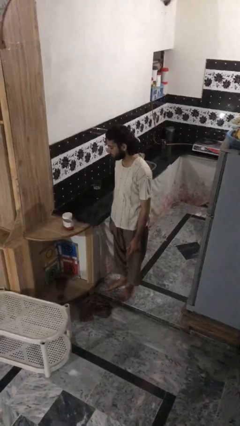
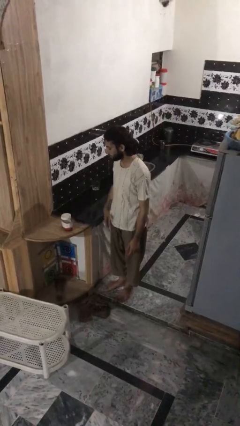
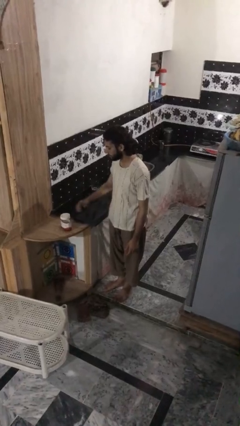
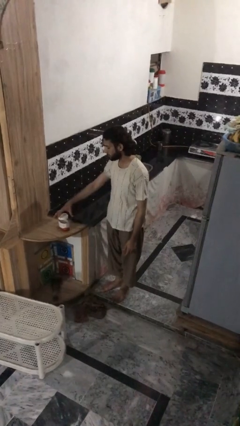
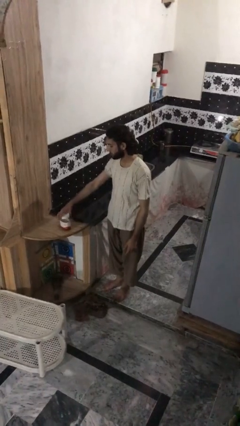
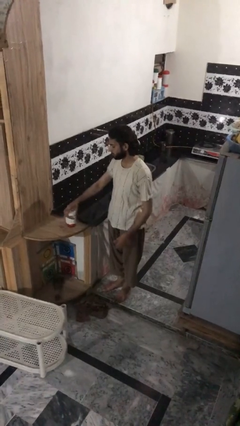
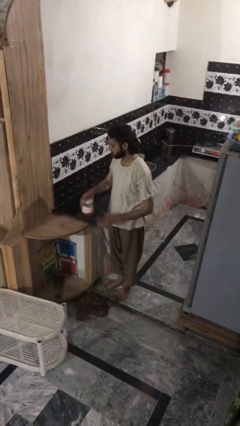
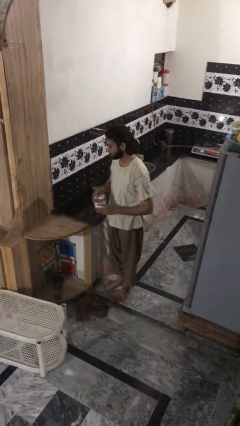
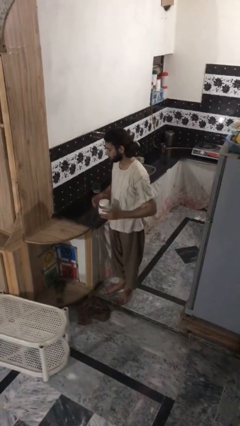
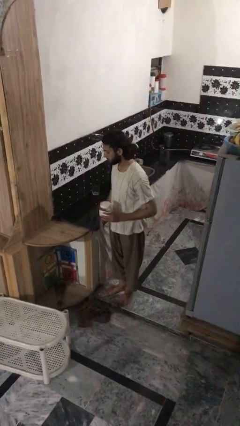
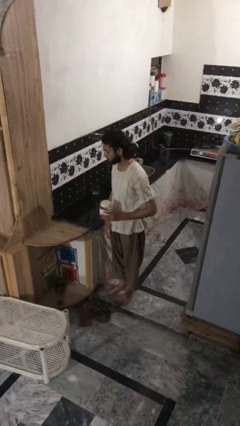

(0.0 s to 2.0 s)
person picks up object from countertop

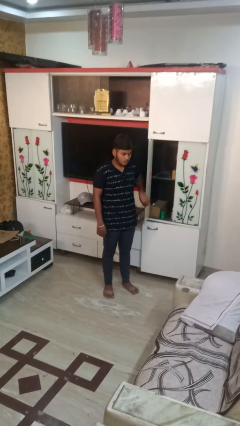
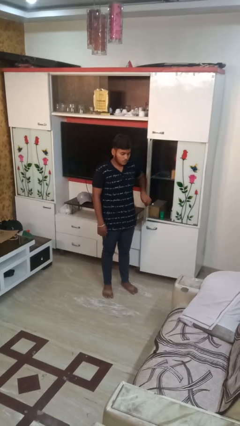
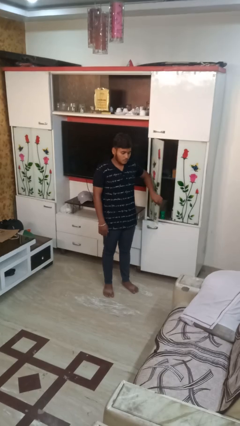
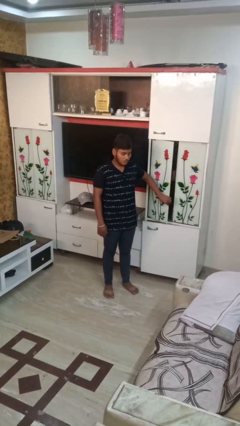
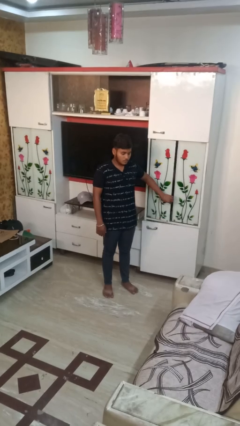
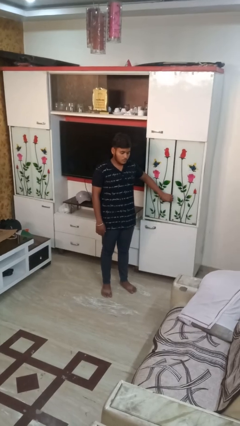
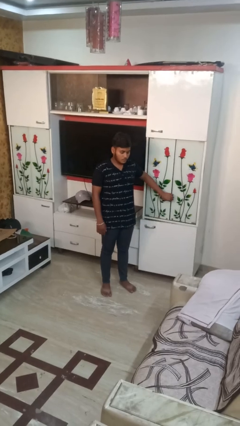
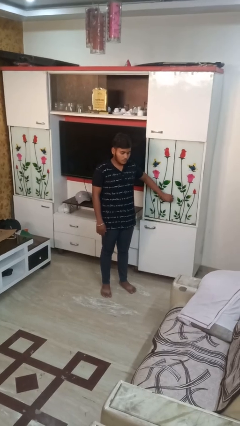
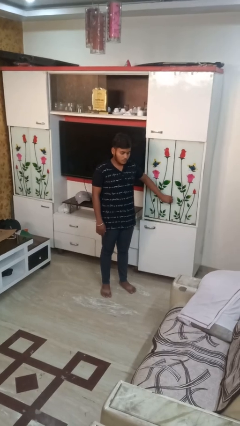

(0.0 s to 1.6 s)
person closes closet door

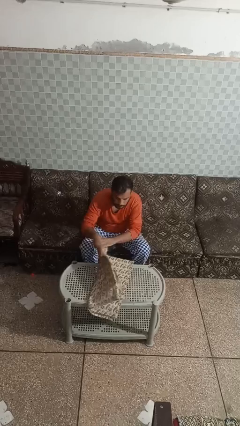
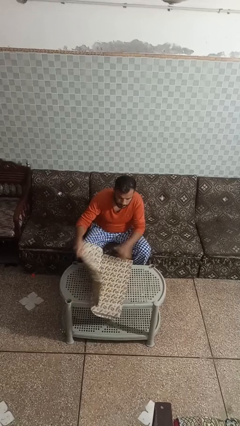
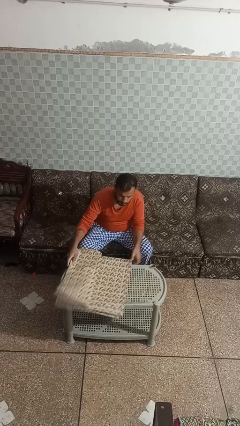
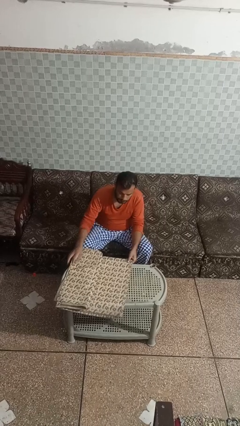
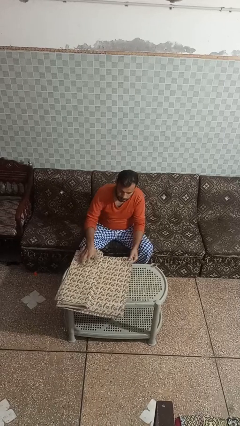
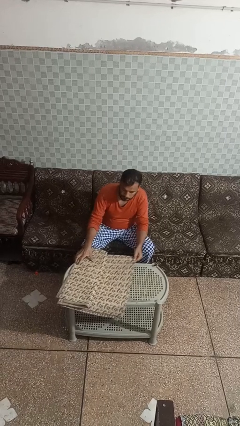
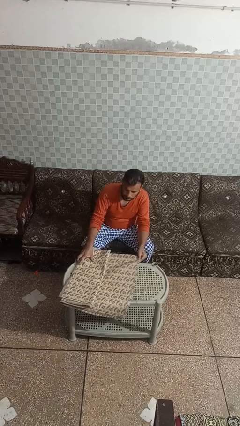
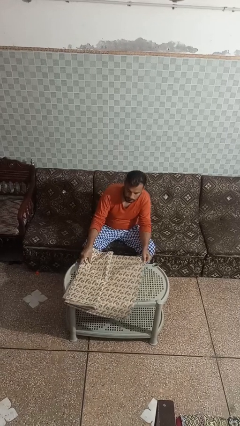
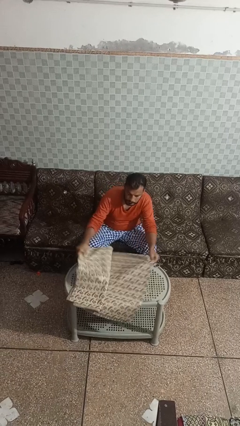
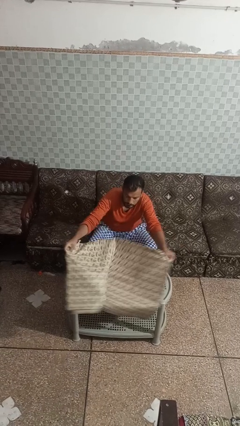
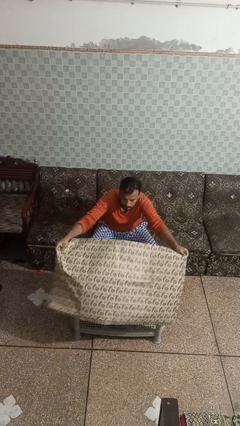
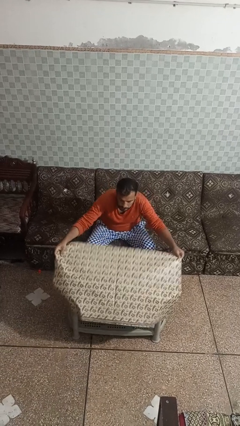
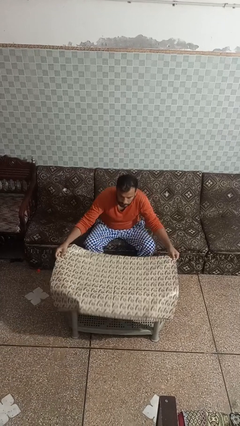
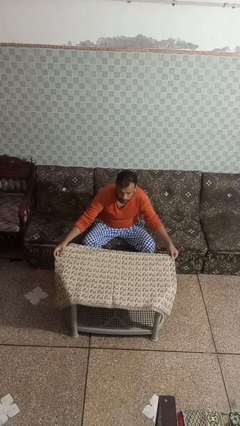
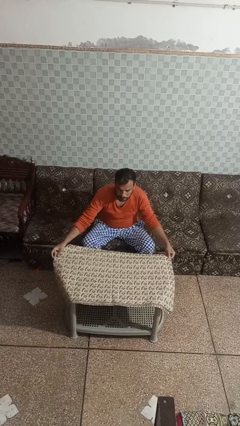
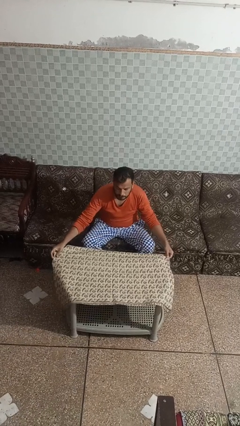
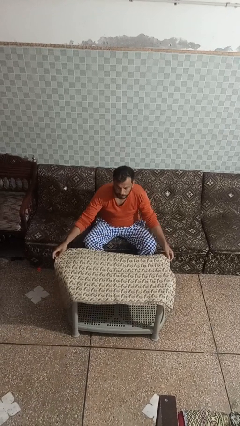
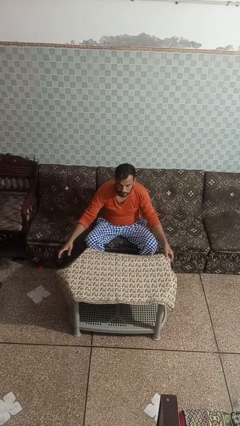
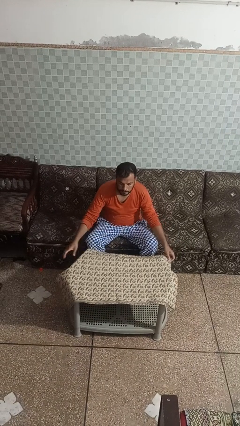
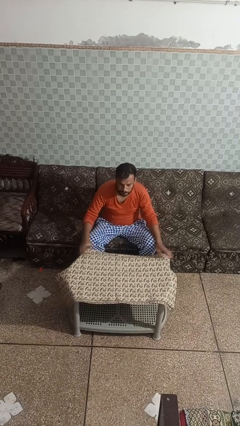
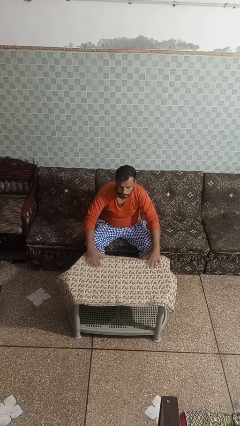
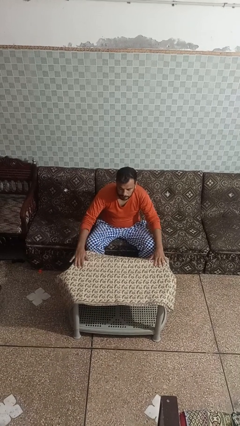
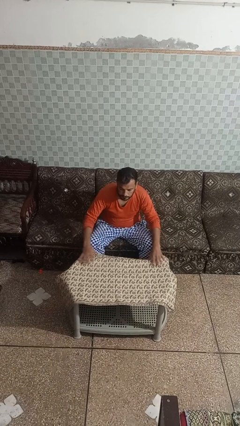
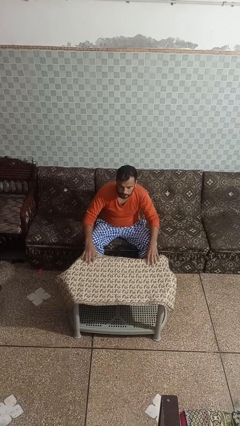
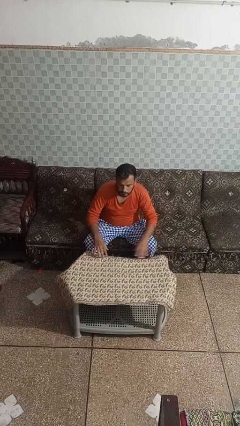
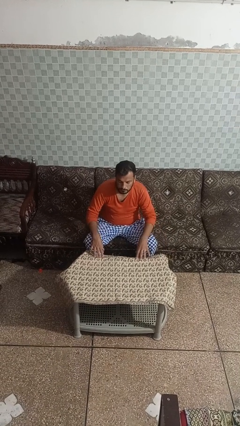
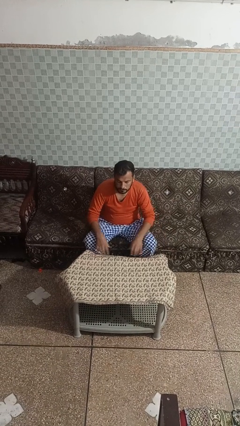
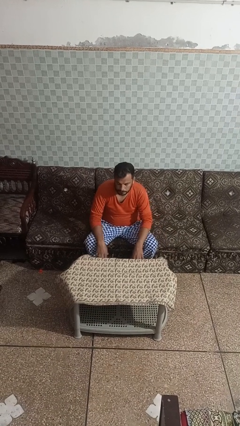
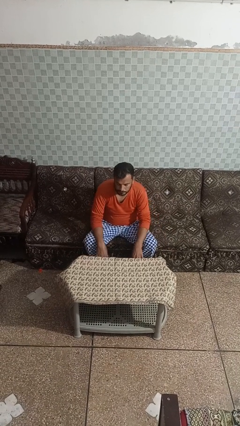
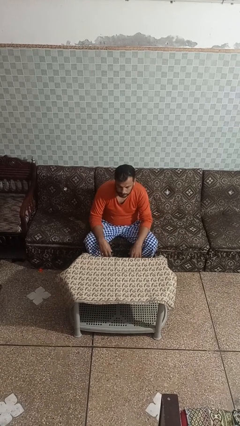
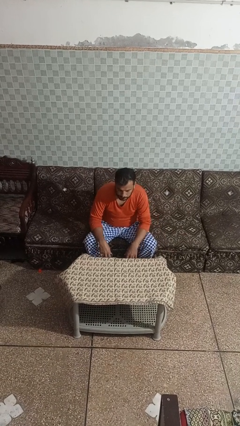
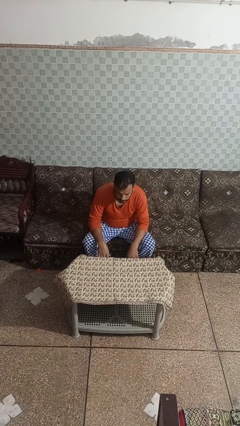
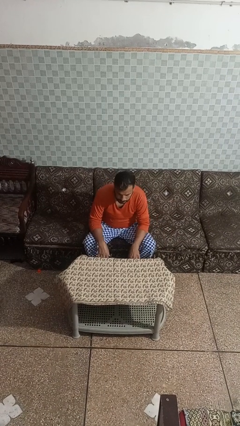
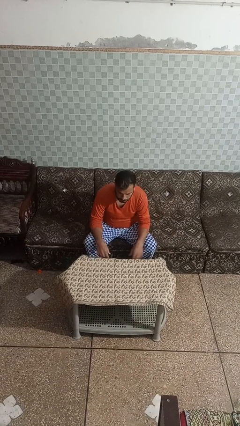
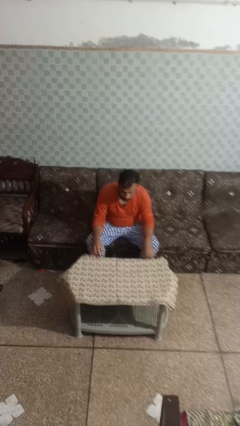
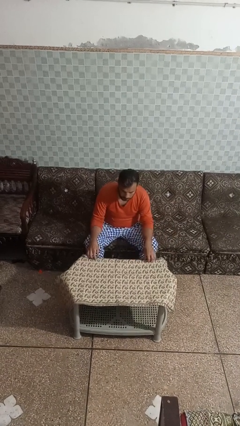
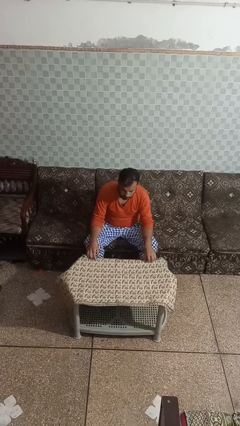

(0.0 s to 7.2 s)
person spreads tablecloth

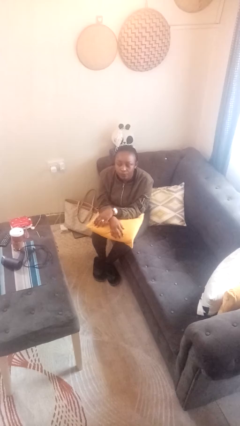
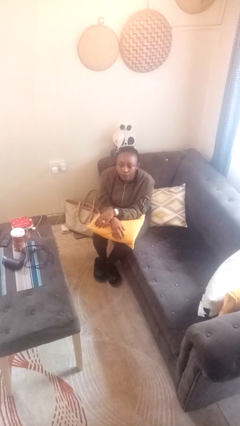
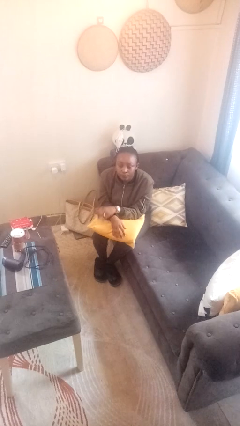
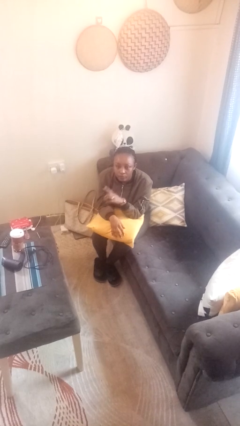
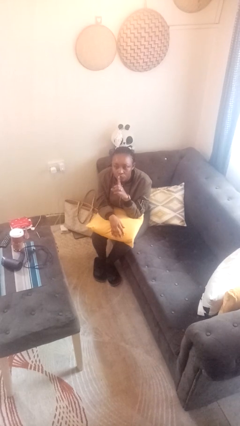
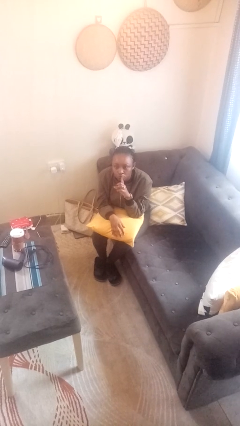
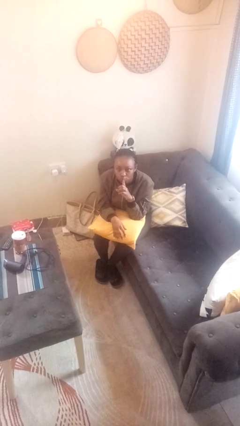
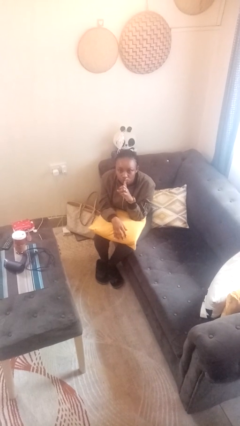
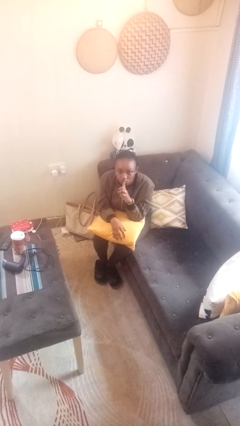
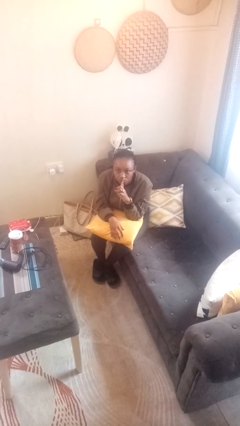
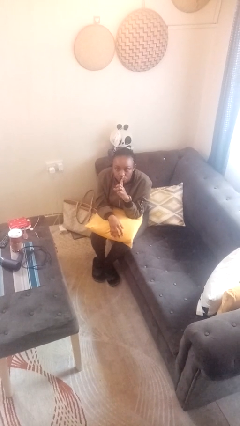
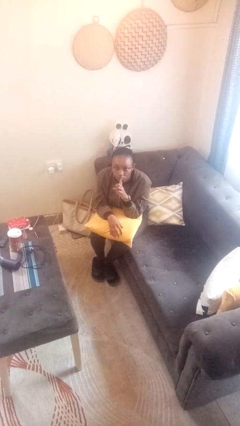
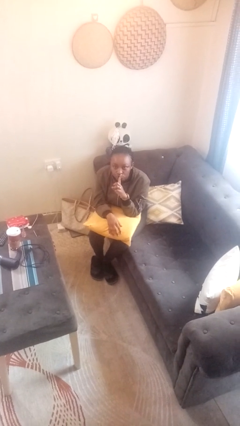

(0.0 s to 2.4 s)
person gestures be quiet

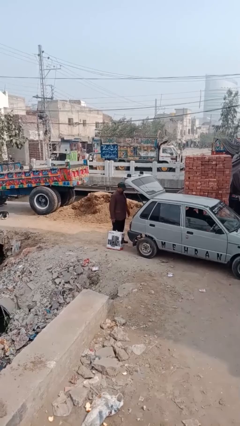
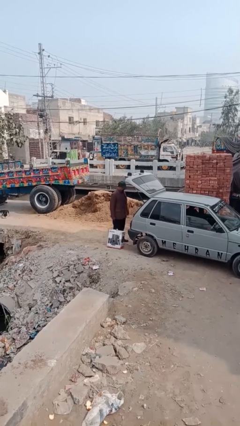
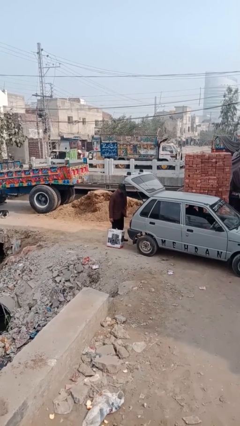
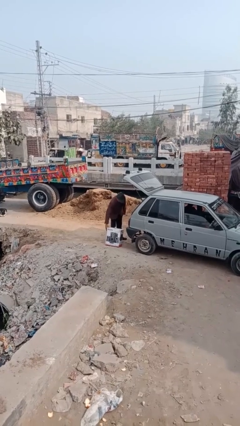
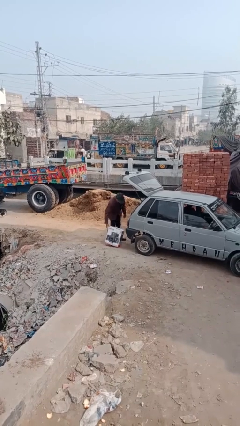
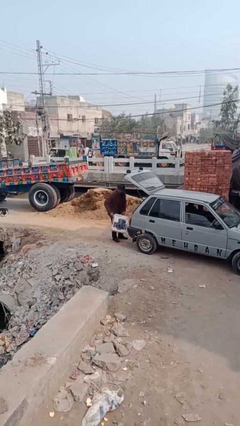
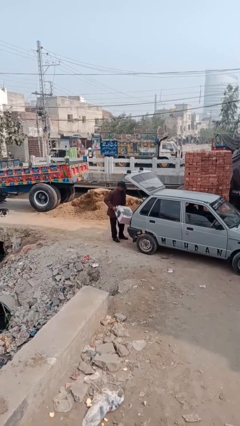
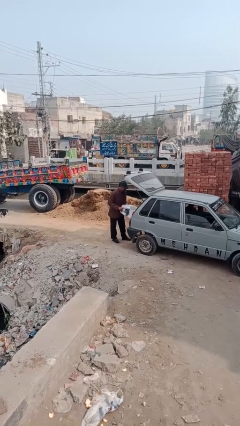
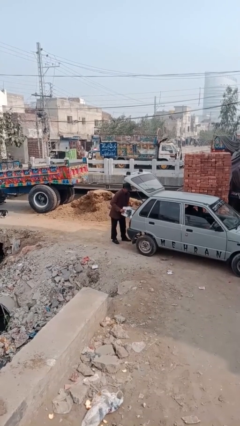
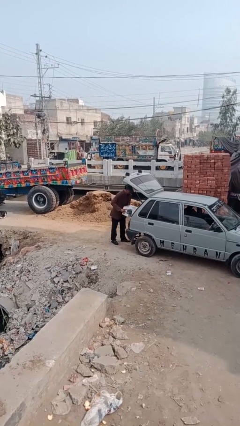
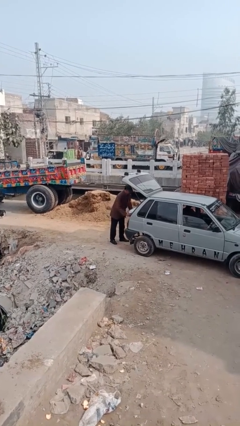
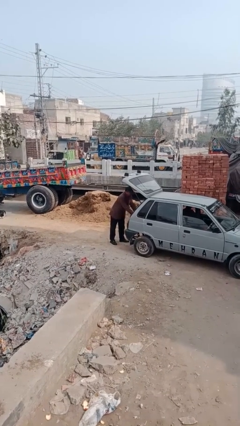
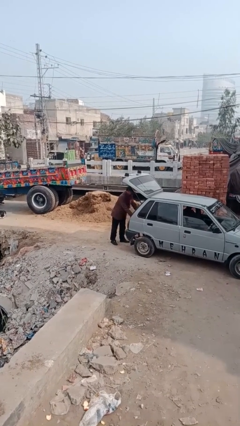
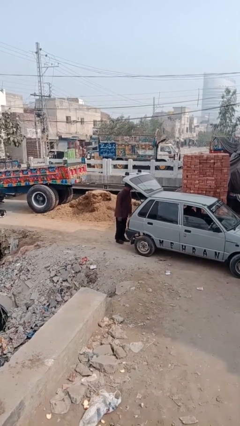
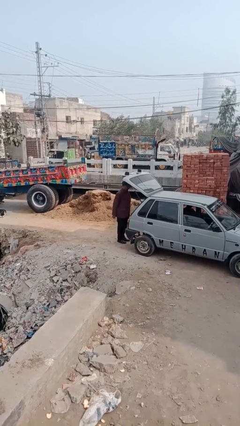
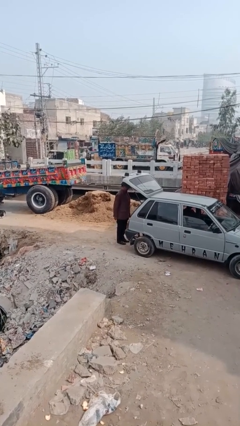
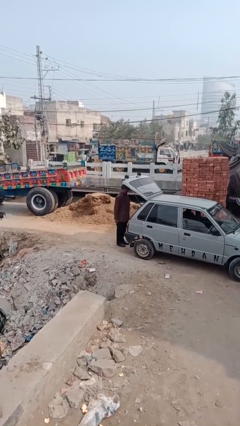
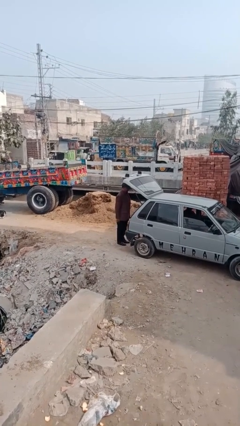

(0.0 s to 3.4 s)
person loads car

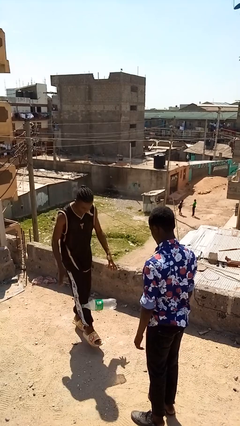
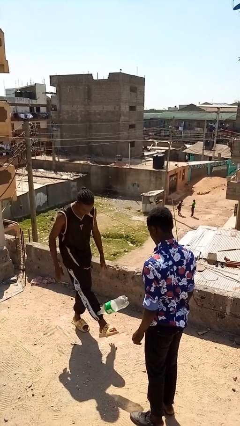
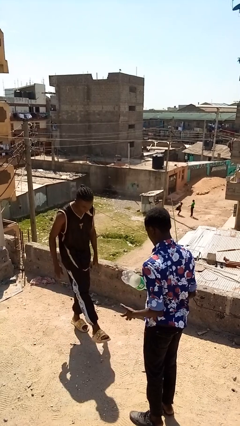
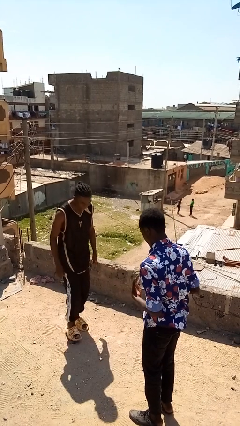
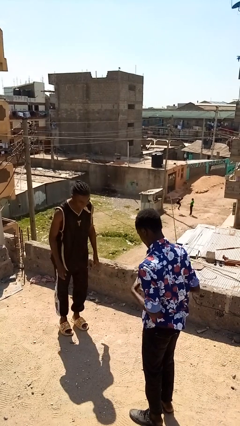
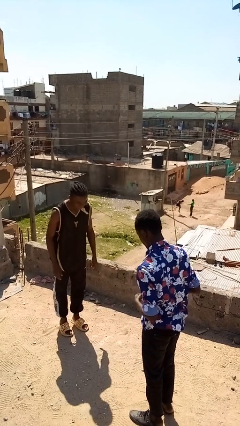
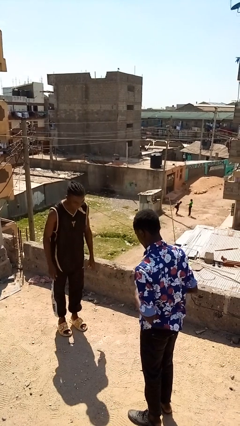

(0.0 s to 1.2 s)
person kicks object to person
